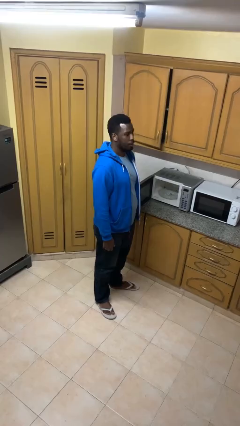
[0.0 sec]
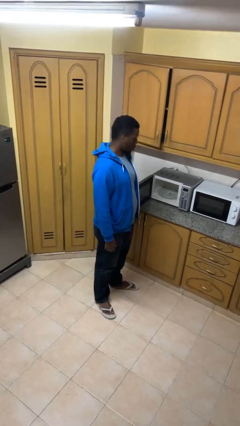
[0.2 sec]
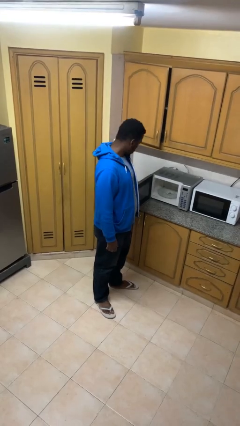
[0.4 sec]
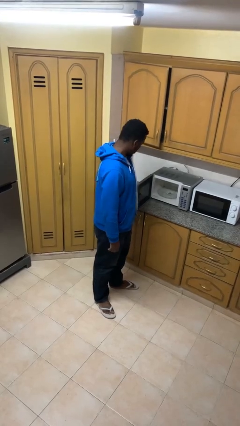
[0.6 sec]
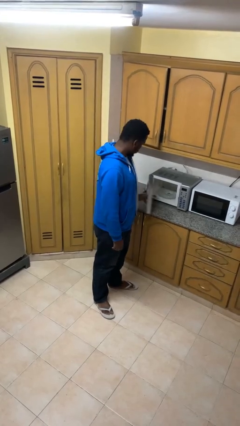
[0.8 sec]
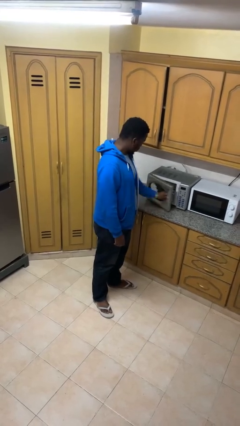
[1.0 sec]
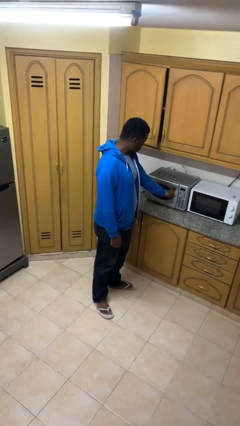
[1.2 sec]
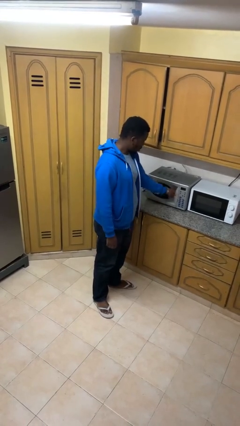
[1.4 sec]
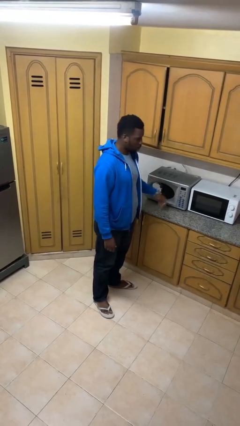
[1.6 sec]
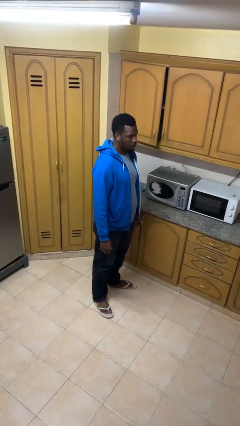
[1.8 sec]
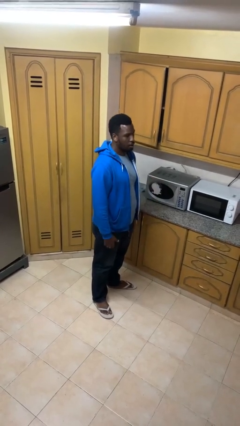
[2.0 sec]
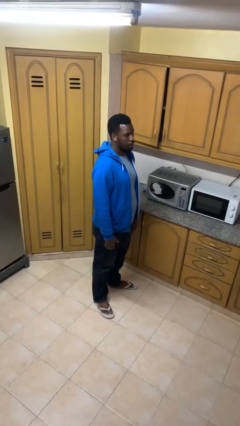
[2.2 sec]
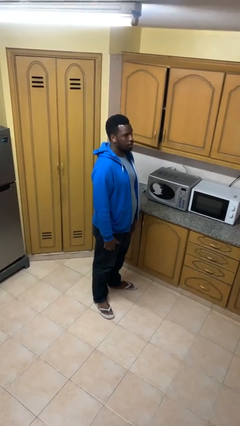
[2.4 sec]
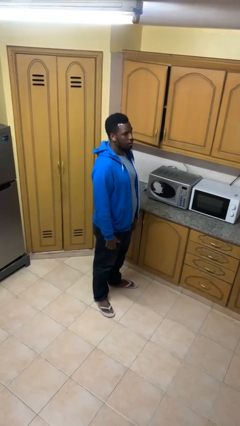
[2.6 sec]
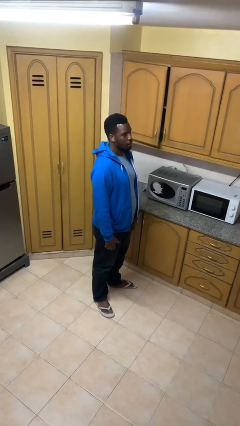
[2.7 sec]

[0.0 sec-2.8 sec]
person closes microwave

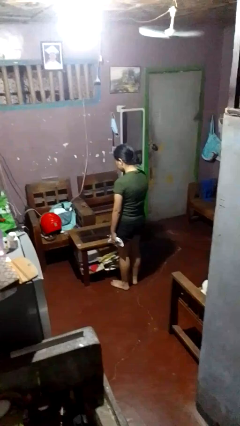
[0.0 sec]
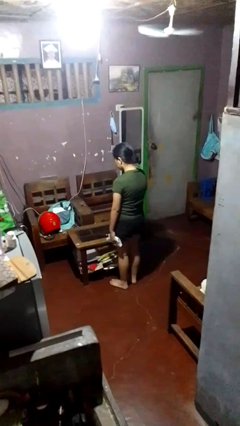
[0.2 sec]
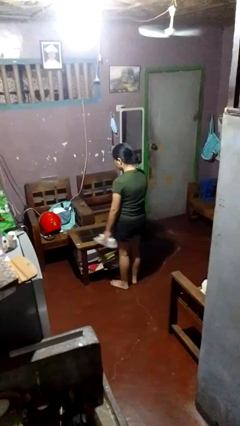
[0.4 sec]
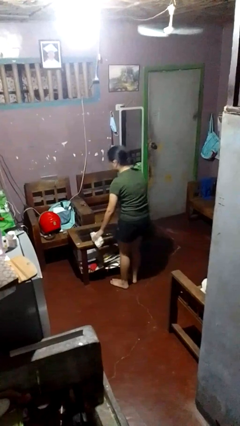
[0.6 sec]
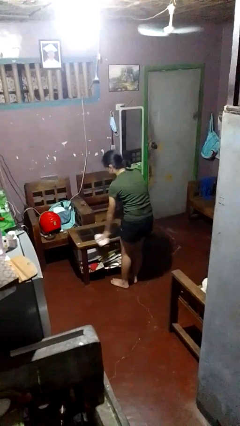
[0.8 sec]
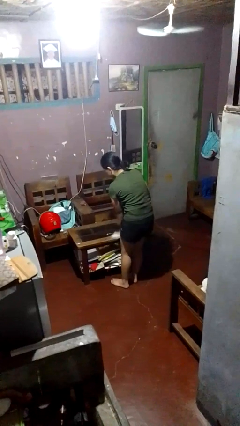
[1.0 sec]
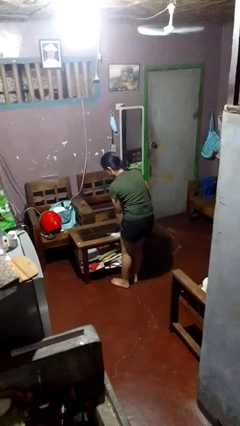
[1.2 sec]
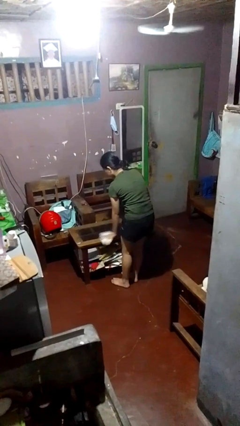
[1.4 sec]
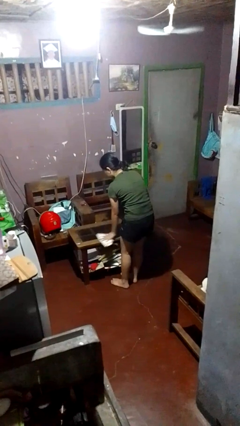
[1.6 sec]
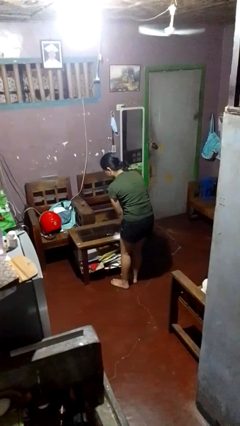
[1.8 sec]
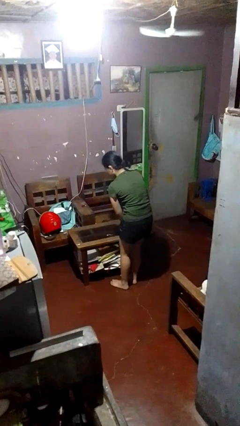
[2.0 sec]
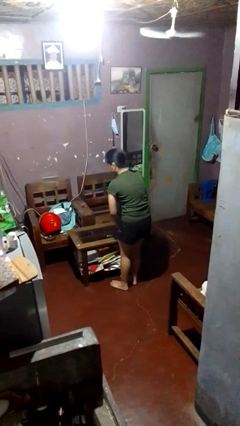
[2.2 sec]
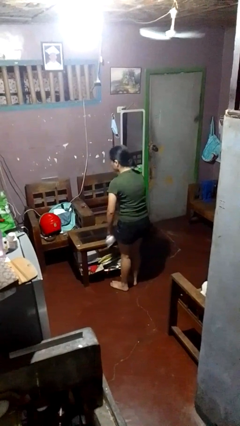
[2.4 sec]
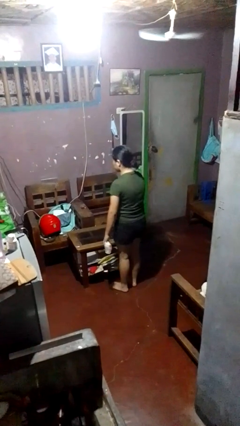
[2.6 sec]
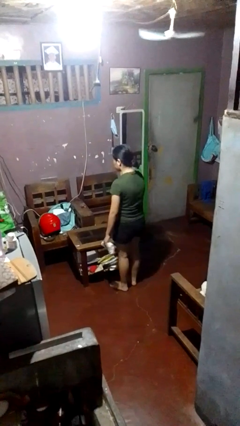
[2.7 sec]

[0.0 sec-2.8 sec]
person cleans table with rag

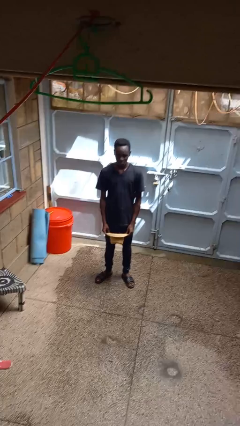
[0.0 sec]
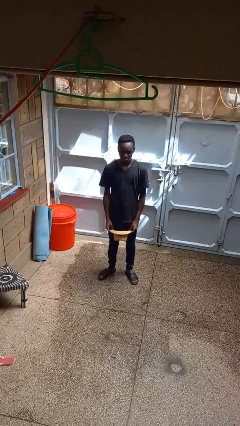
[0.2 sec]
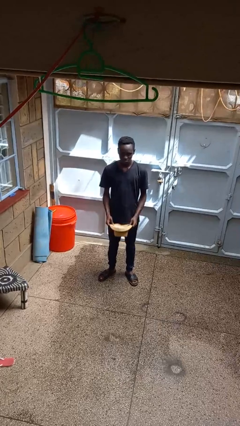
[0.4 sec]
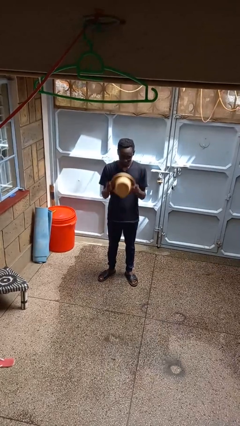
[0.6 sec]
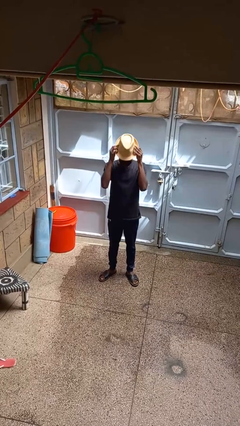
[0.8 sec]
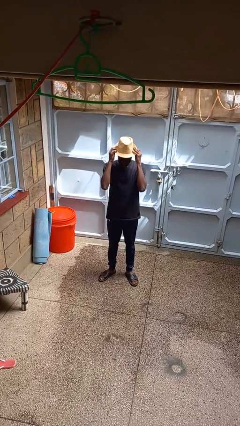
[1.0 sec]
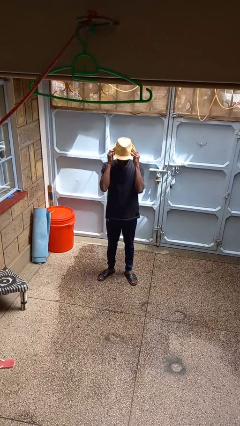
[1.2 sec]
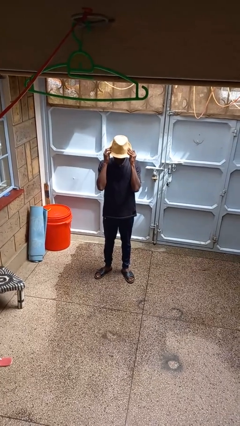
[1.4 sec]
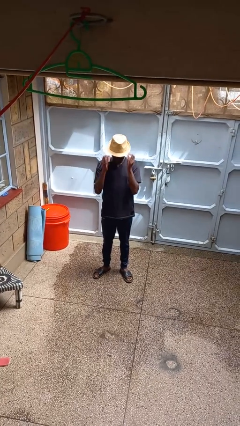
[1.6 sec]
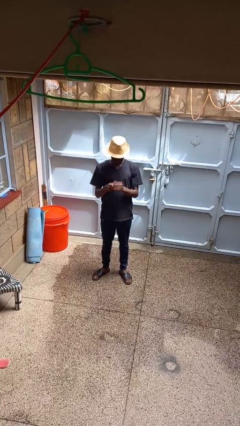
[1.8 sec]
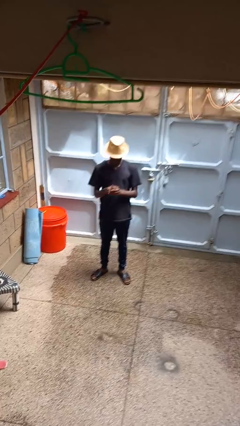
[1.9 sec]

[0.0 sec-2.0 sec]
person puts on hat

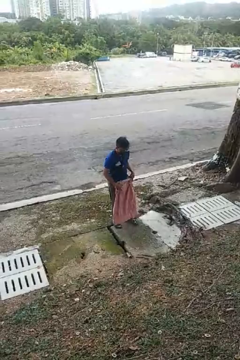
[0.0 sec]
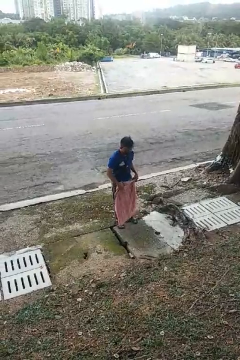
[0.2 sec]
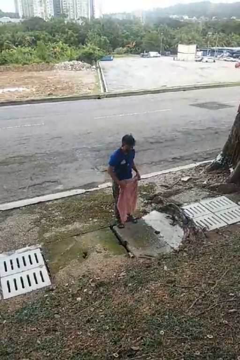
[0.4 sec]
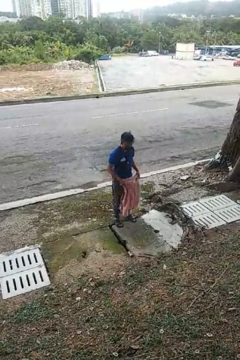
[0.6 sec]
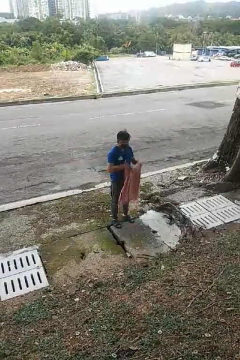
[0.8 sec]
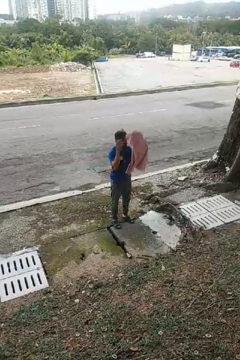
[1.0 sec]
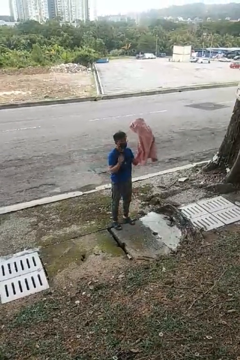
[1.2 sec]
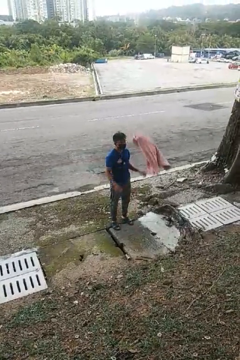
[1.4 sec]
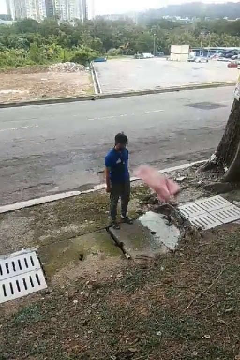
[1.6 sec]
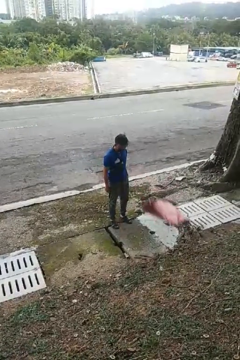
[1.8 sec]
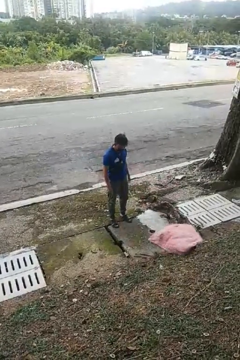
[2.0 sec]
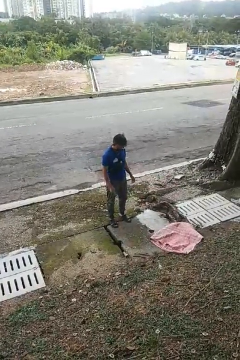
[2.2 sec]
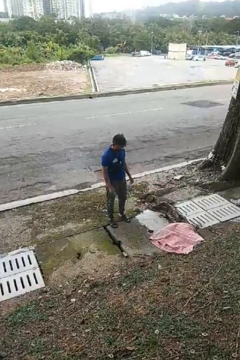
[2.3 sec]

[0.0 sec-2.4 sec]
person throws object into air

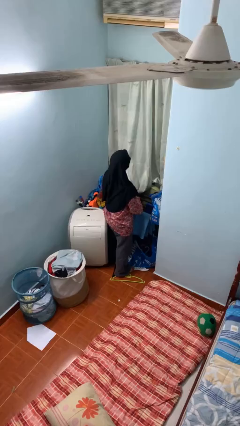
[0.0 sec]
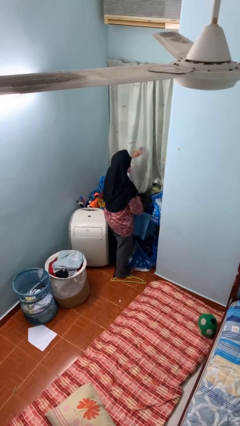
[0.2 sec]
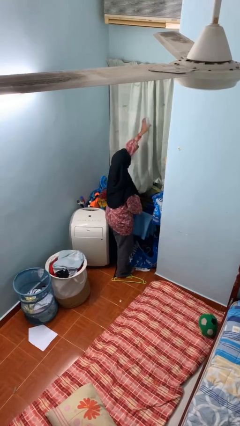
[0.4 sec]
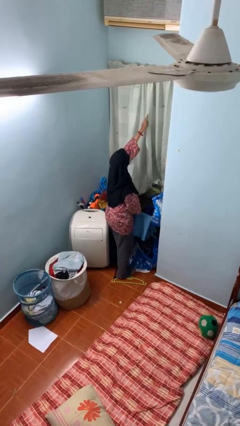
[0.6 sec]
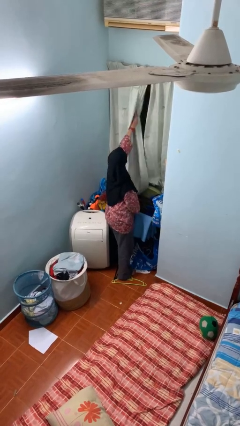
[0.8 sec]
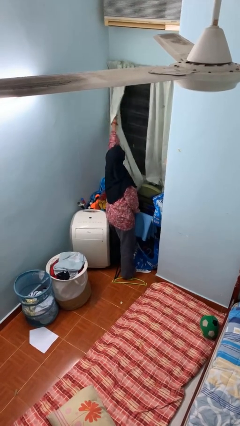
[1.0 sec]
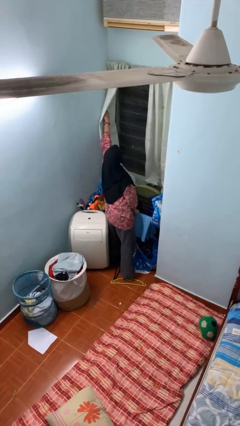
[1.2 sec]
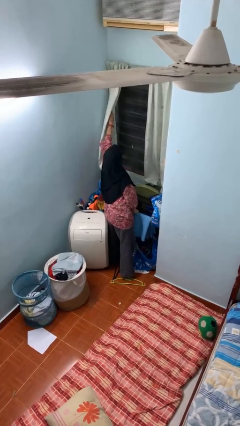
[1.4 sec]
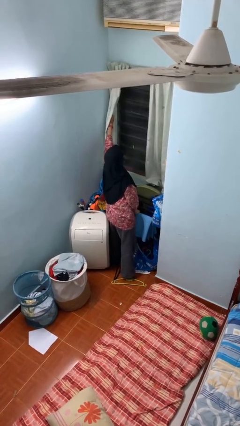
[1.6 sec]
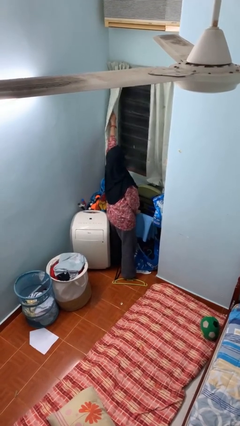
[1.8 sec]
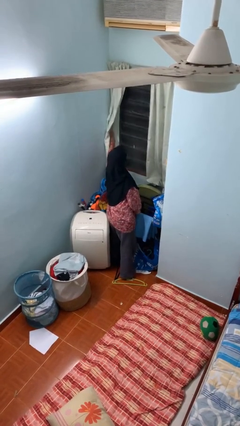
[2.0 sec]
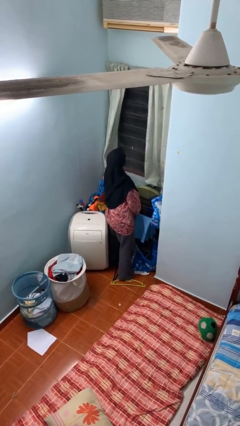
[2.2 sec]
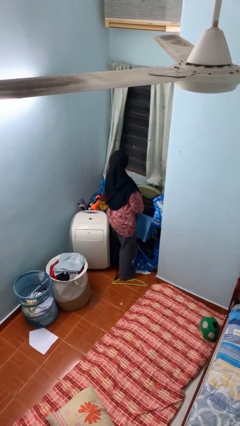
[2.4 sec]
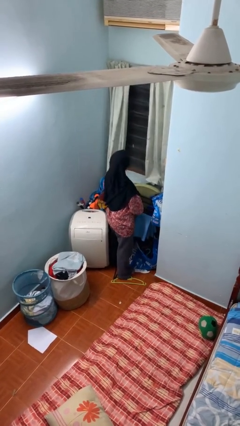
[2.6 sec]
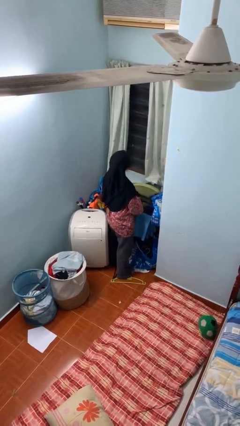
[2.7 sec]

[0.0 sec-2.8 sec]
person opens curtains

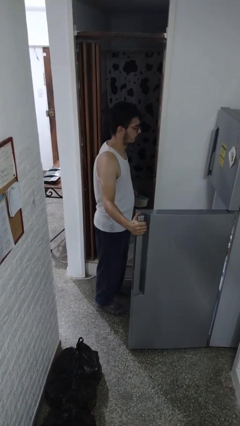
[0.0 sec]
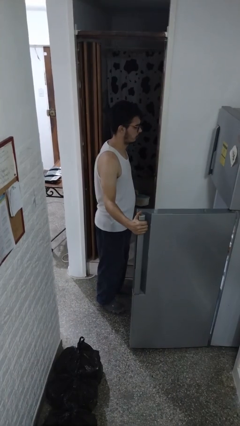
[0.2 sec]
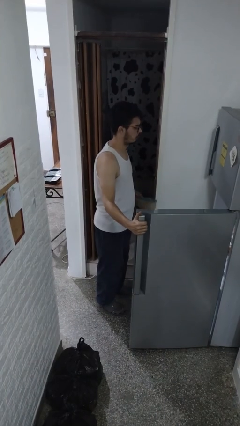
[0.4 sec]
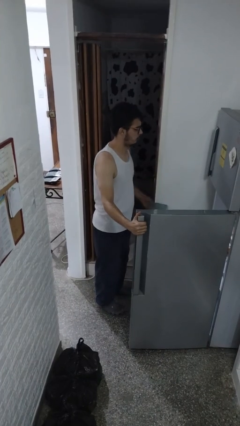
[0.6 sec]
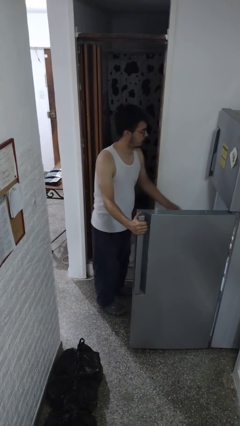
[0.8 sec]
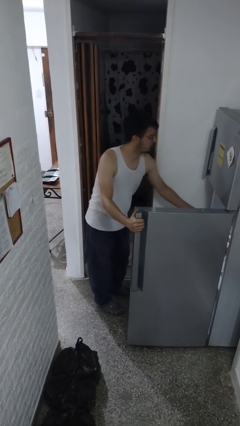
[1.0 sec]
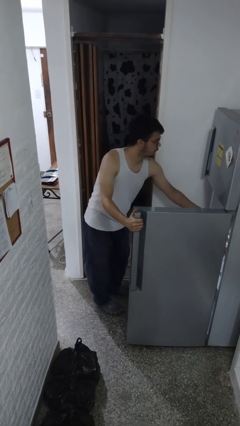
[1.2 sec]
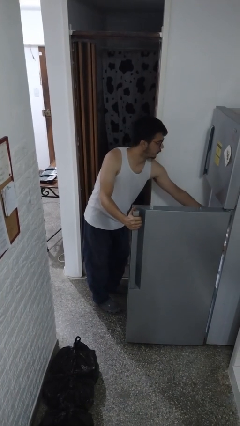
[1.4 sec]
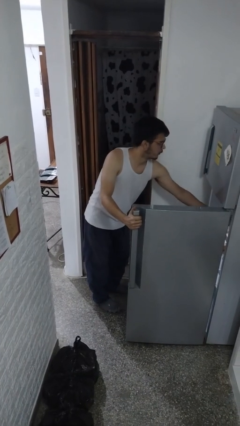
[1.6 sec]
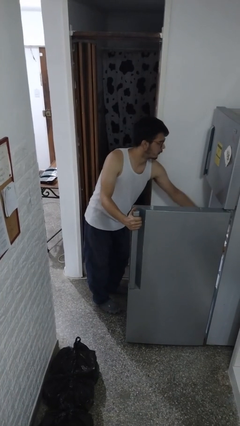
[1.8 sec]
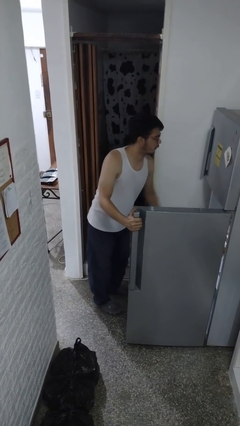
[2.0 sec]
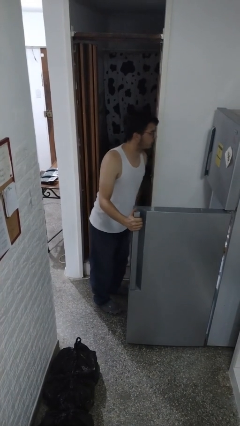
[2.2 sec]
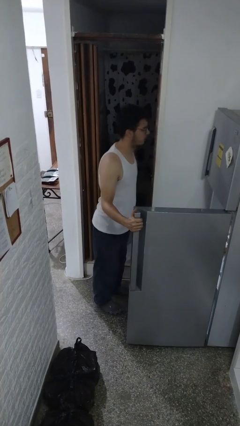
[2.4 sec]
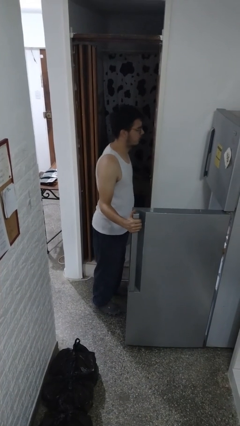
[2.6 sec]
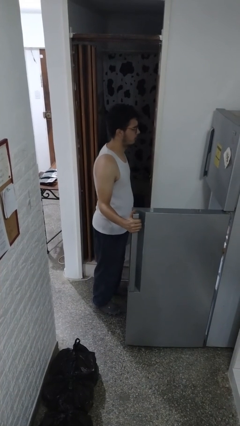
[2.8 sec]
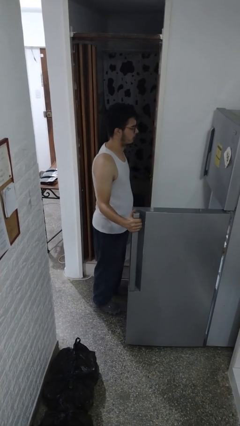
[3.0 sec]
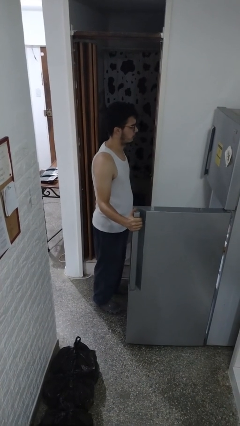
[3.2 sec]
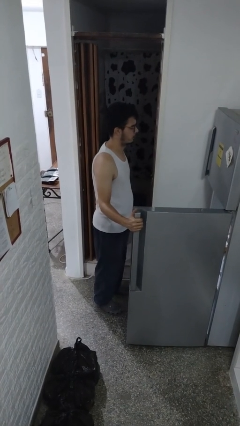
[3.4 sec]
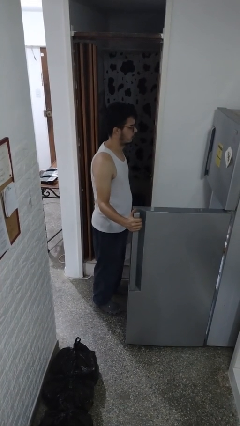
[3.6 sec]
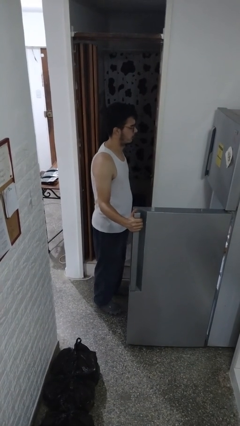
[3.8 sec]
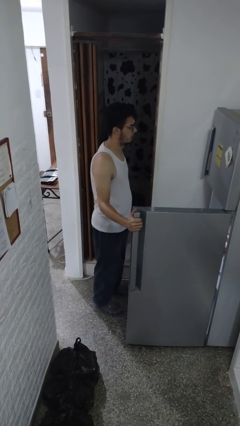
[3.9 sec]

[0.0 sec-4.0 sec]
person puts object into refrigerator

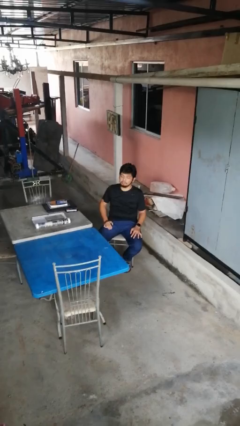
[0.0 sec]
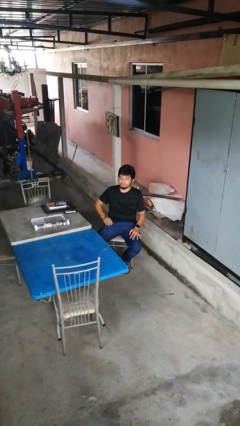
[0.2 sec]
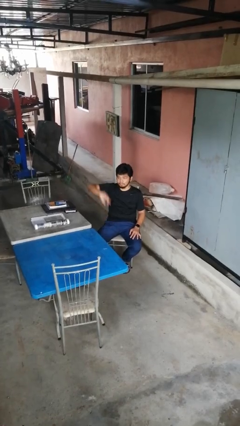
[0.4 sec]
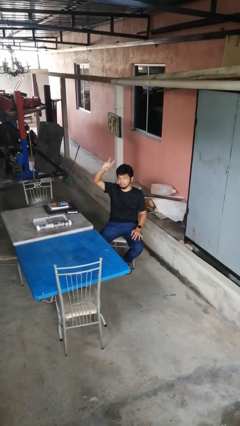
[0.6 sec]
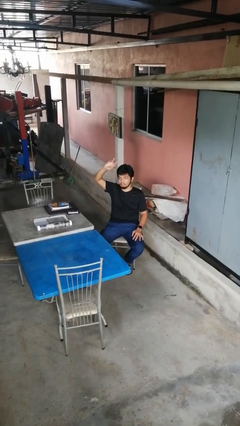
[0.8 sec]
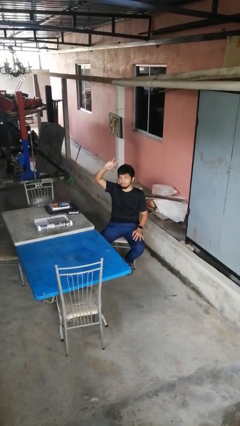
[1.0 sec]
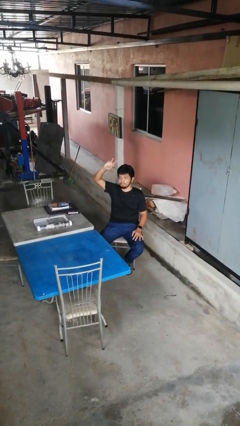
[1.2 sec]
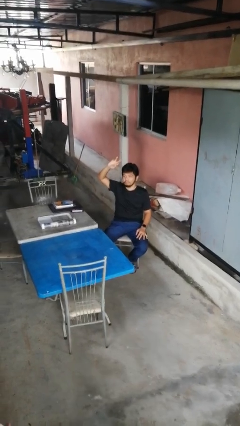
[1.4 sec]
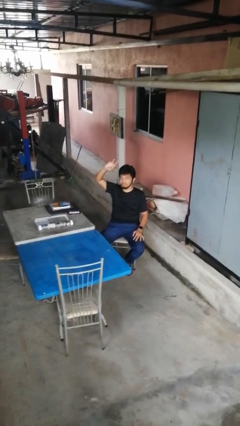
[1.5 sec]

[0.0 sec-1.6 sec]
person gestures swipe up
